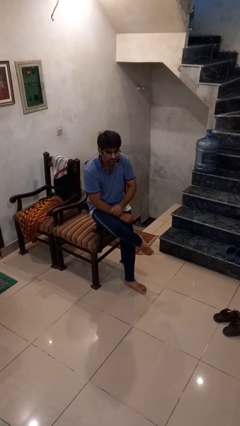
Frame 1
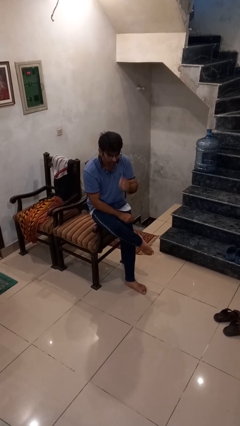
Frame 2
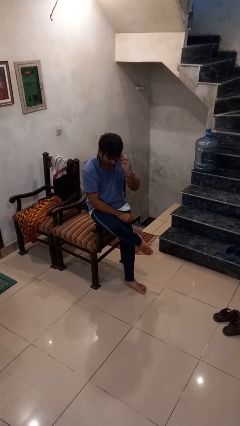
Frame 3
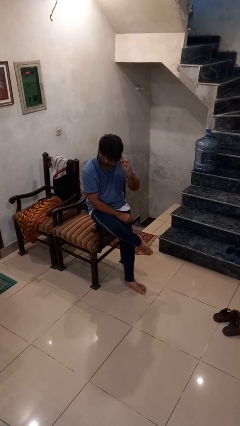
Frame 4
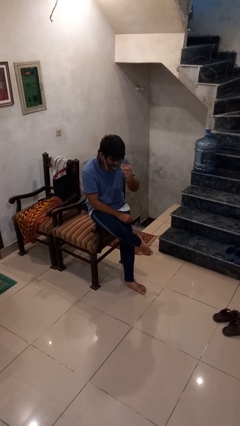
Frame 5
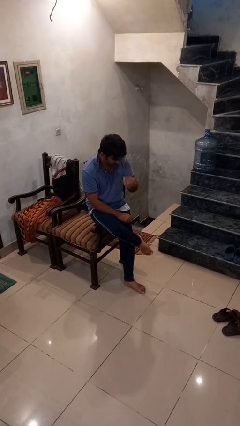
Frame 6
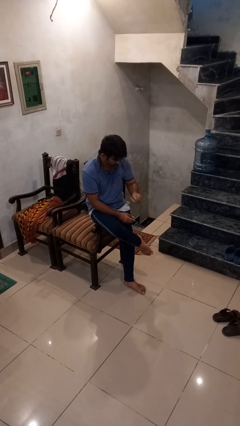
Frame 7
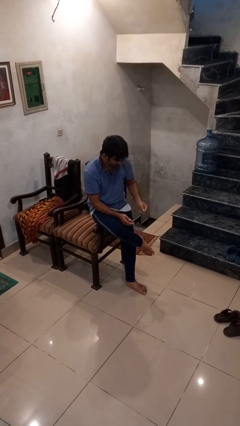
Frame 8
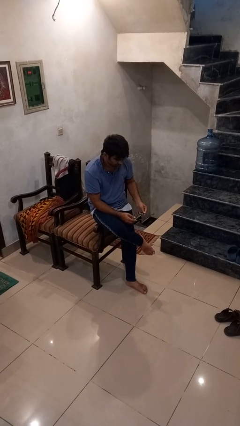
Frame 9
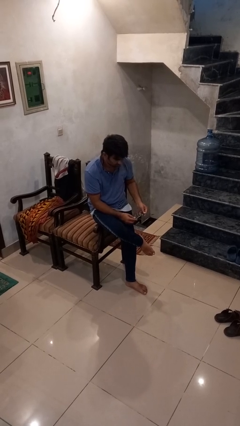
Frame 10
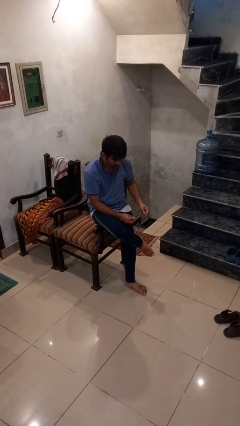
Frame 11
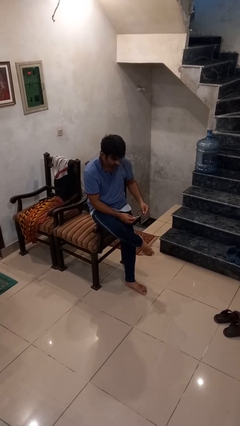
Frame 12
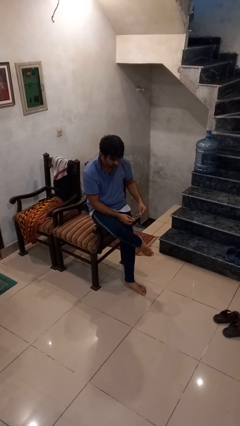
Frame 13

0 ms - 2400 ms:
person takes off glasses

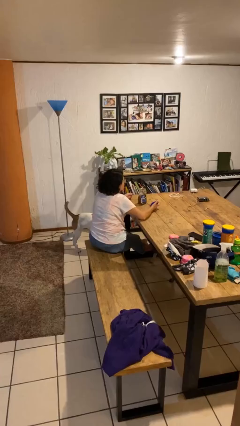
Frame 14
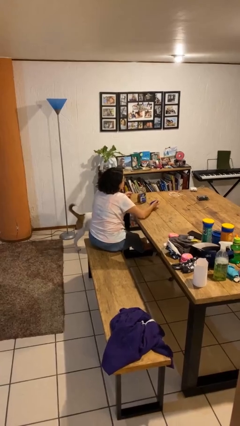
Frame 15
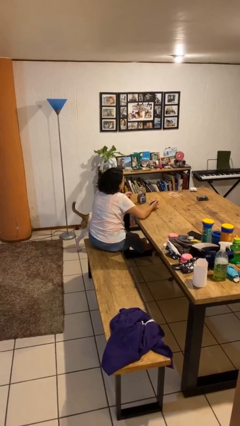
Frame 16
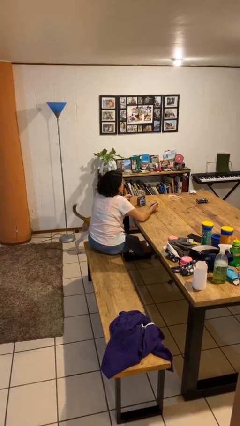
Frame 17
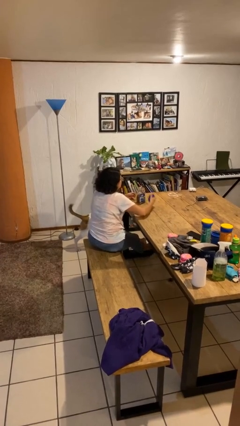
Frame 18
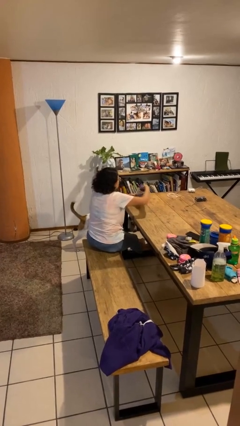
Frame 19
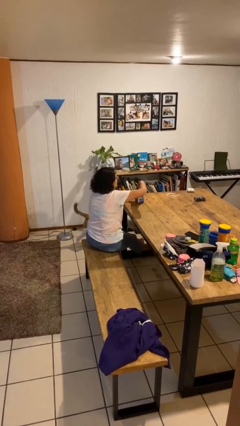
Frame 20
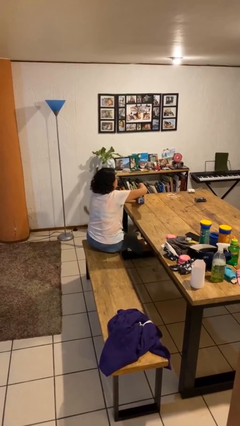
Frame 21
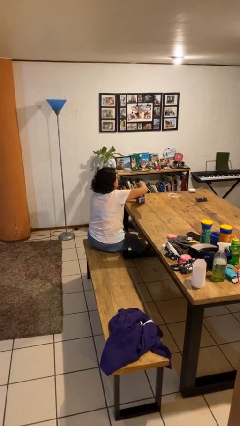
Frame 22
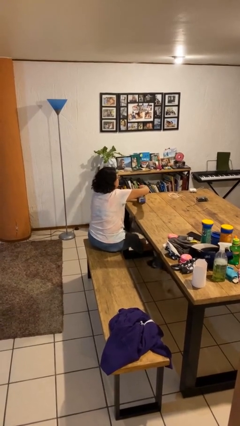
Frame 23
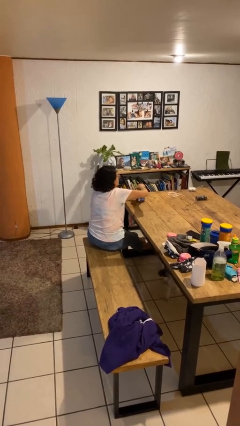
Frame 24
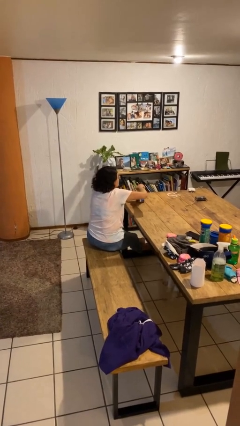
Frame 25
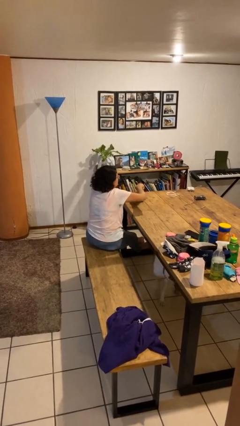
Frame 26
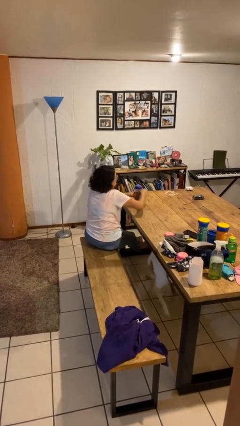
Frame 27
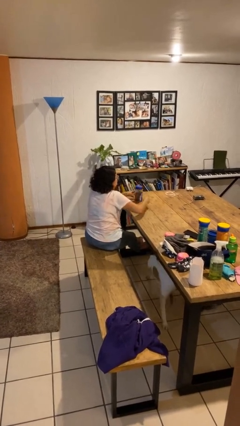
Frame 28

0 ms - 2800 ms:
person closes jar

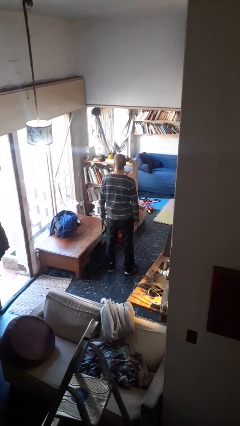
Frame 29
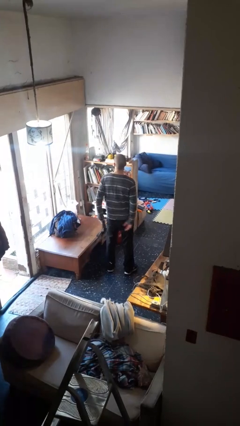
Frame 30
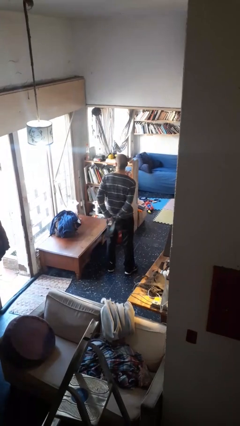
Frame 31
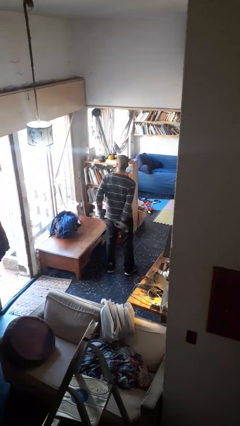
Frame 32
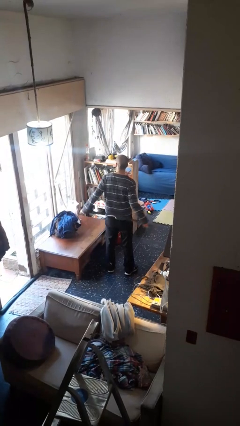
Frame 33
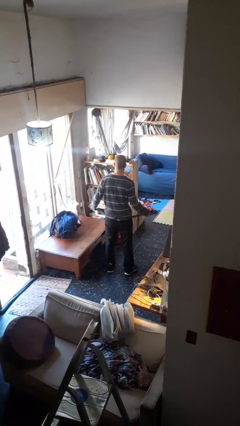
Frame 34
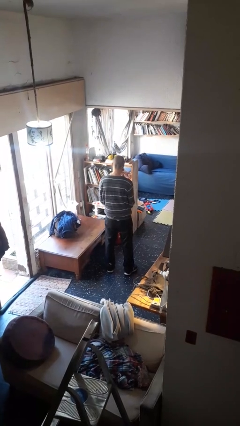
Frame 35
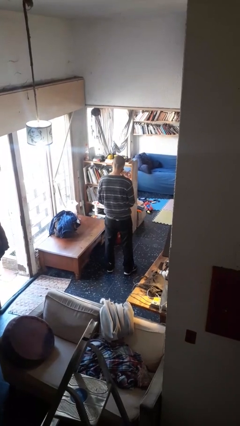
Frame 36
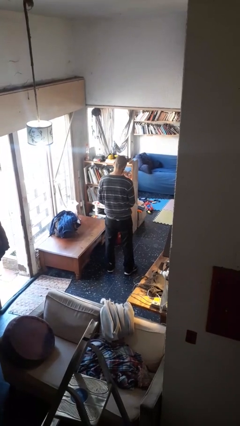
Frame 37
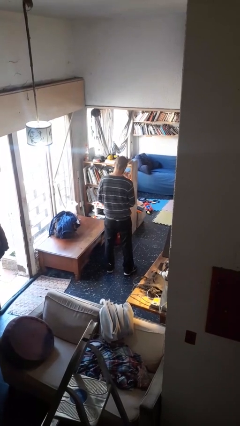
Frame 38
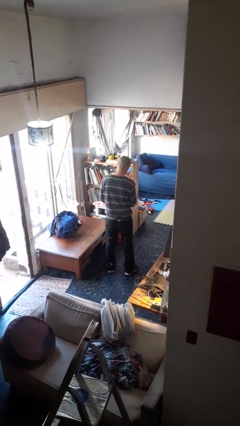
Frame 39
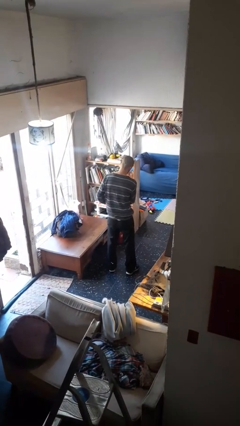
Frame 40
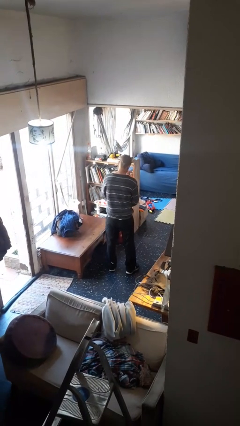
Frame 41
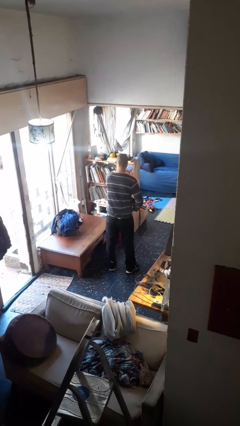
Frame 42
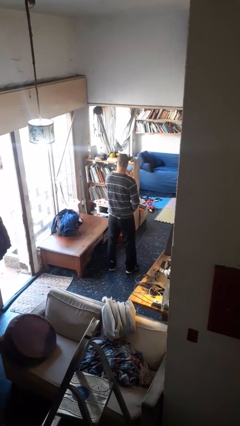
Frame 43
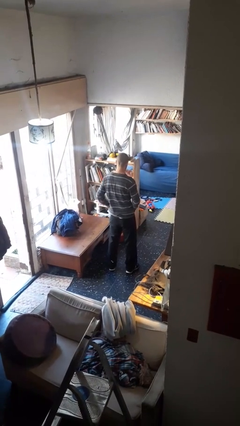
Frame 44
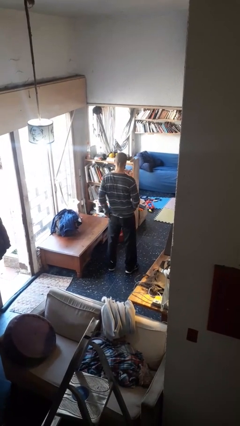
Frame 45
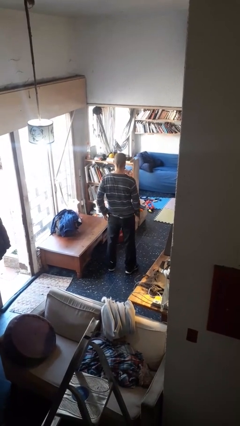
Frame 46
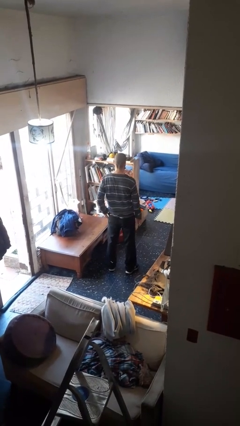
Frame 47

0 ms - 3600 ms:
person puts on belt

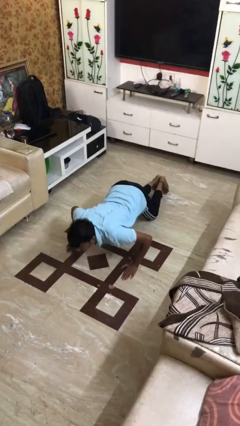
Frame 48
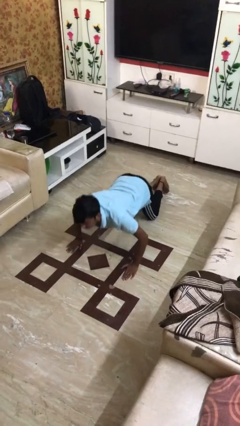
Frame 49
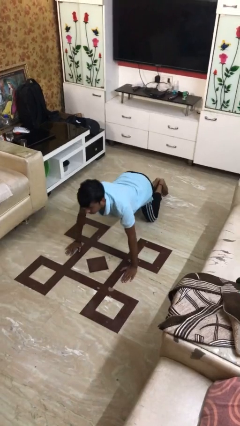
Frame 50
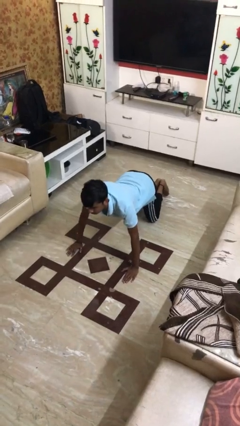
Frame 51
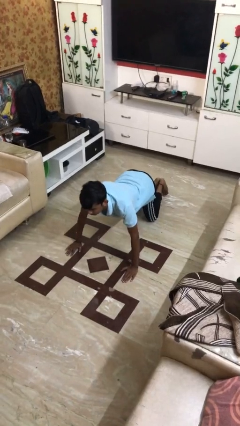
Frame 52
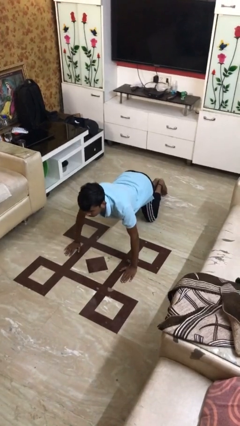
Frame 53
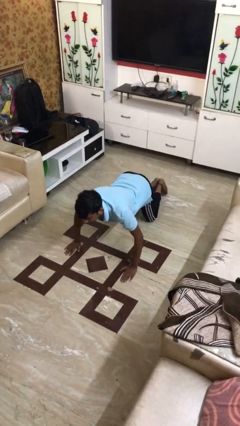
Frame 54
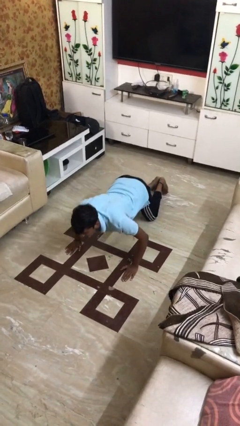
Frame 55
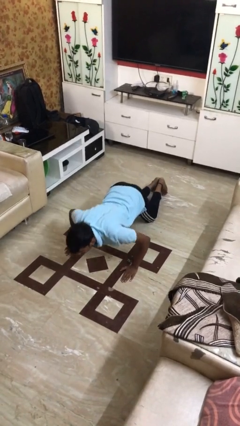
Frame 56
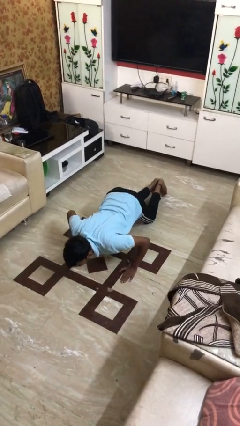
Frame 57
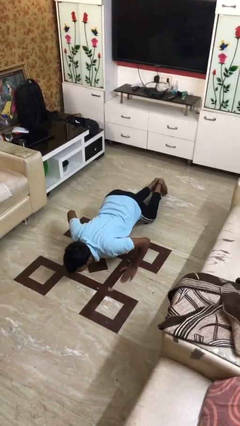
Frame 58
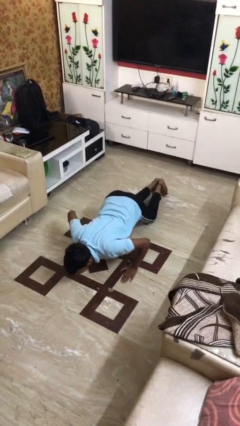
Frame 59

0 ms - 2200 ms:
person exercises with pushup

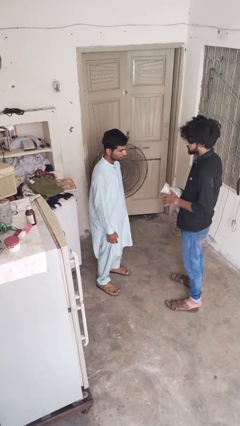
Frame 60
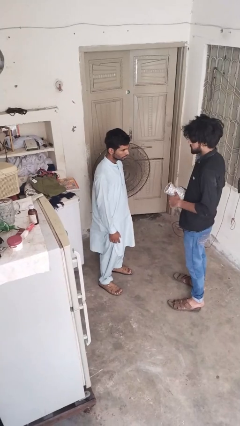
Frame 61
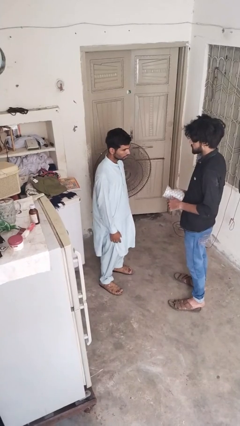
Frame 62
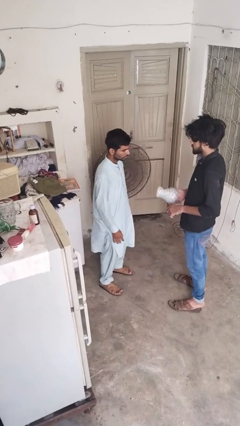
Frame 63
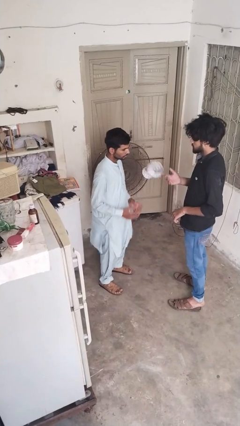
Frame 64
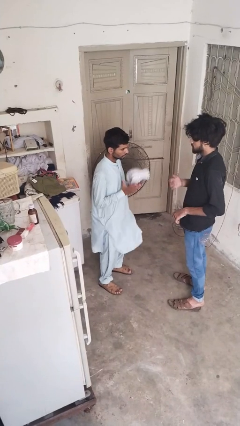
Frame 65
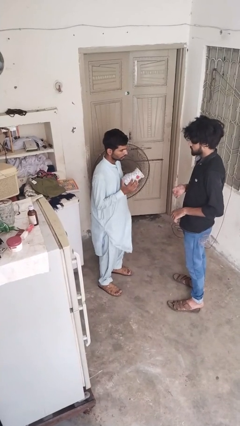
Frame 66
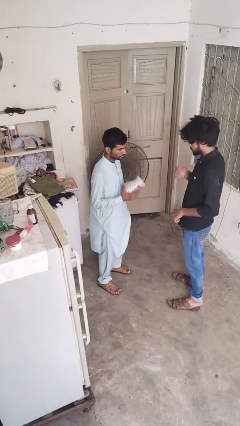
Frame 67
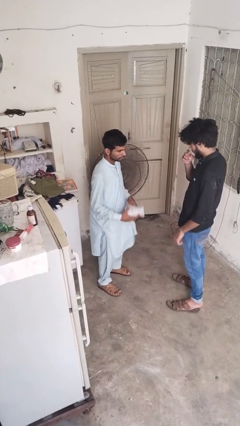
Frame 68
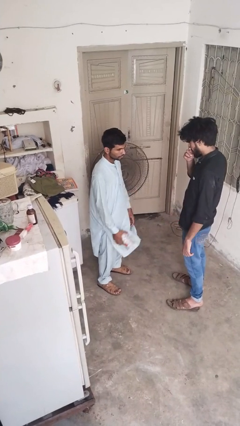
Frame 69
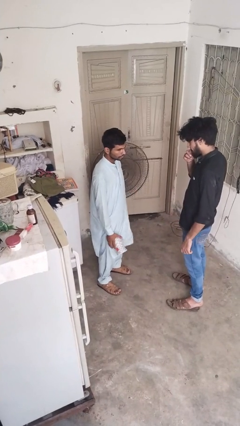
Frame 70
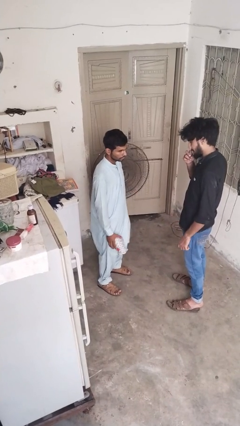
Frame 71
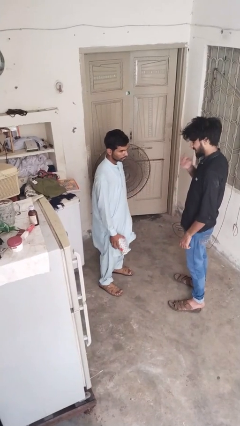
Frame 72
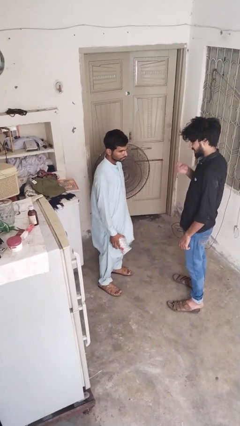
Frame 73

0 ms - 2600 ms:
person catches object from person

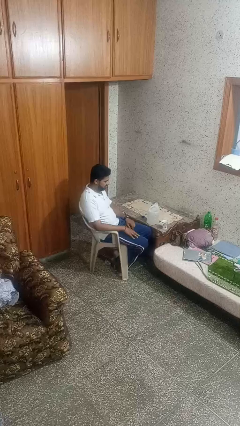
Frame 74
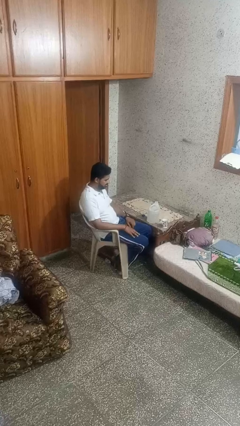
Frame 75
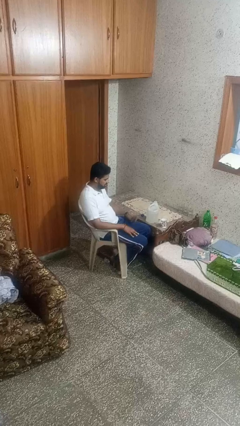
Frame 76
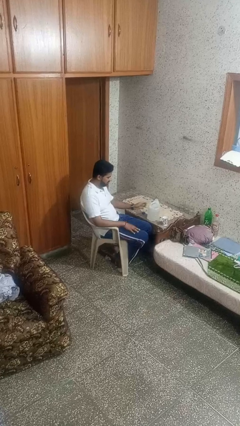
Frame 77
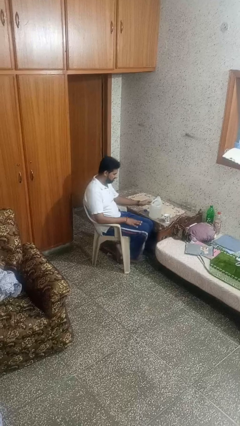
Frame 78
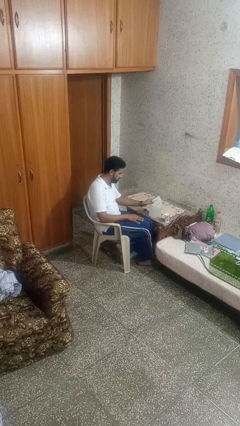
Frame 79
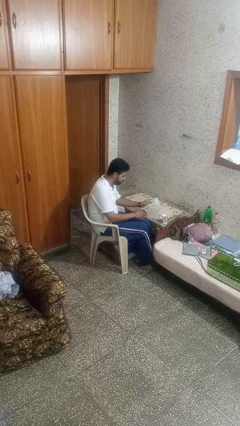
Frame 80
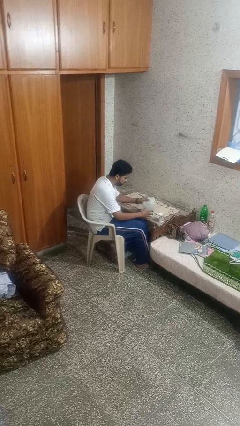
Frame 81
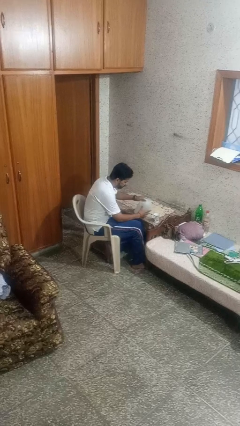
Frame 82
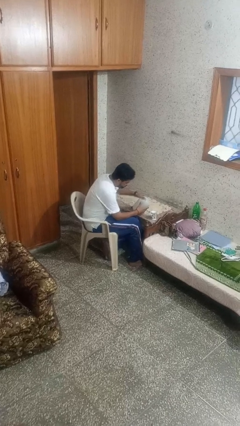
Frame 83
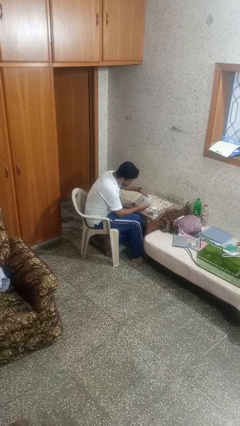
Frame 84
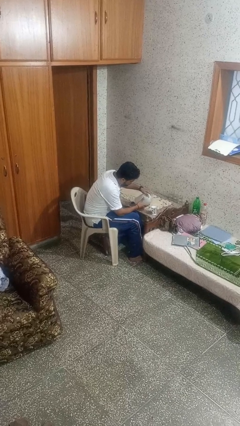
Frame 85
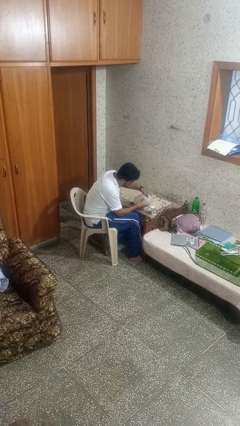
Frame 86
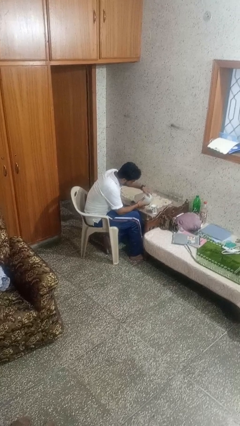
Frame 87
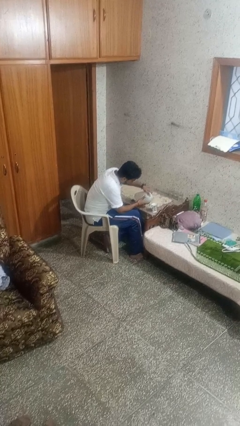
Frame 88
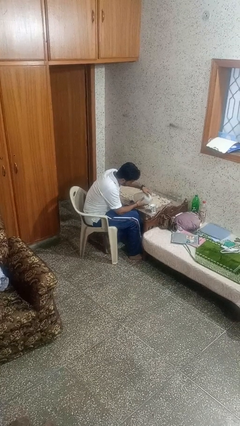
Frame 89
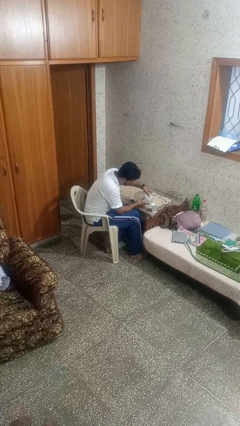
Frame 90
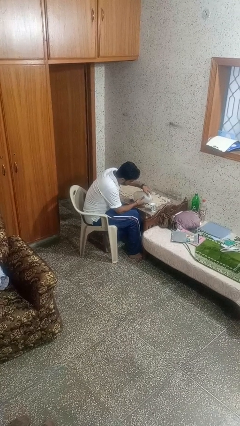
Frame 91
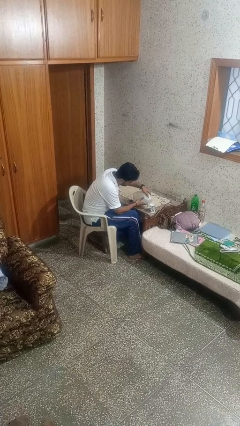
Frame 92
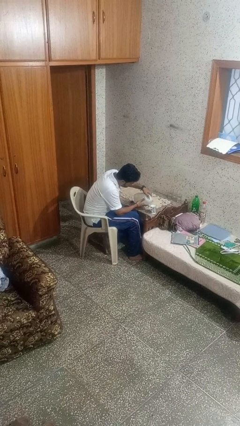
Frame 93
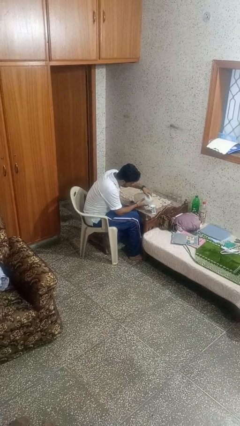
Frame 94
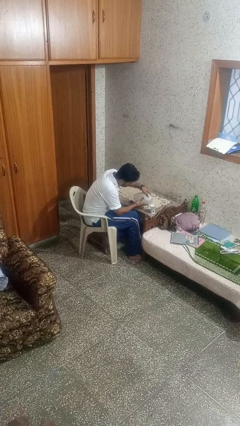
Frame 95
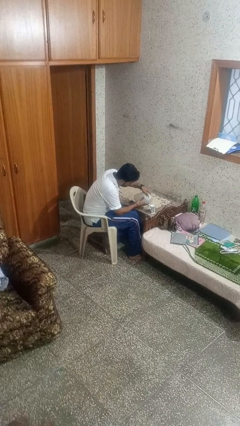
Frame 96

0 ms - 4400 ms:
person pours liquid into cup
